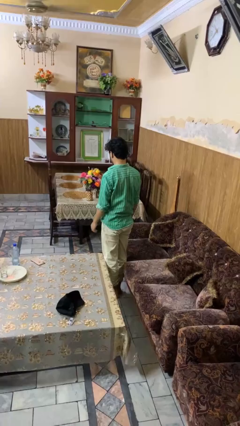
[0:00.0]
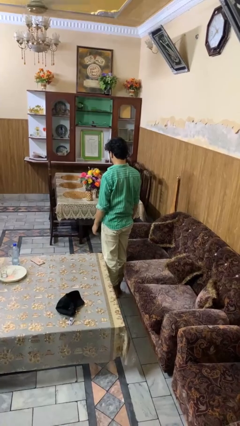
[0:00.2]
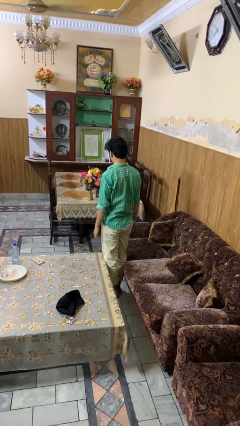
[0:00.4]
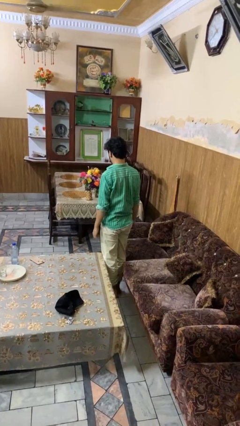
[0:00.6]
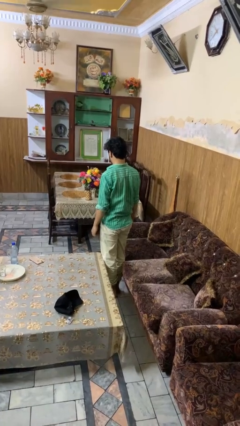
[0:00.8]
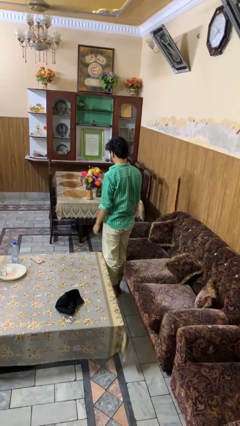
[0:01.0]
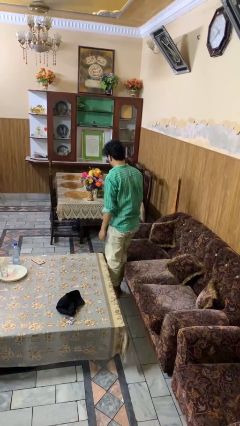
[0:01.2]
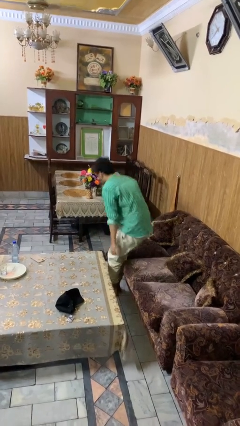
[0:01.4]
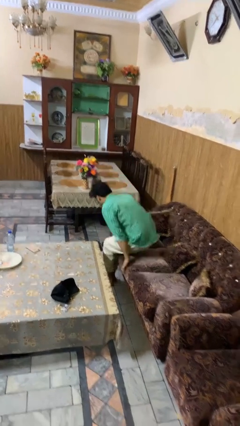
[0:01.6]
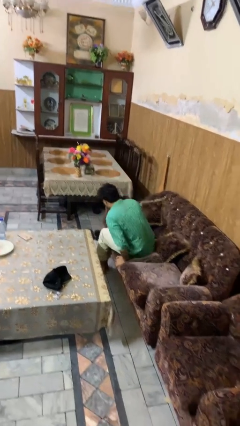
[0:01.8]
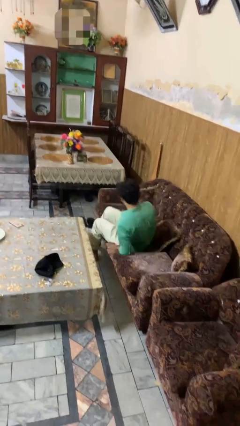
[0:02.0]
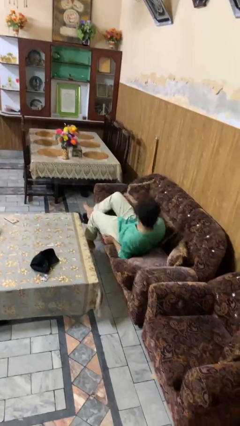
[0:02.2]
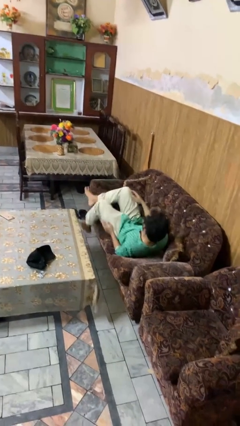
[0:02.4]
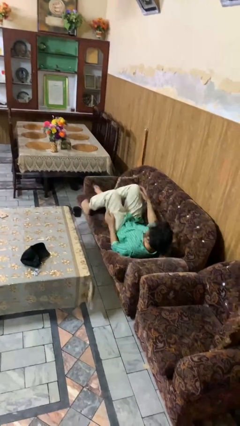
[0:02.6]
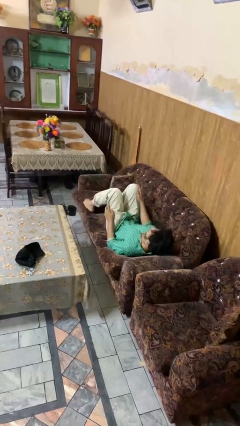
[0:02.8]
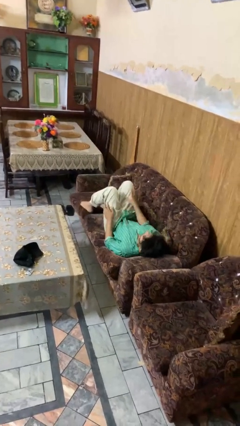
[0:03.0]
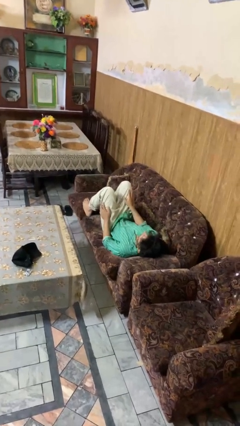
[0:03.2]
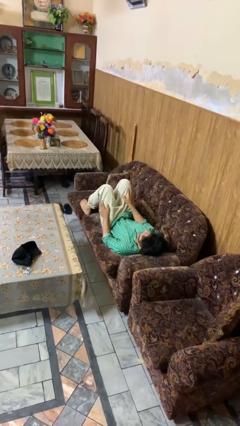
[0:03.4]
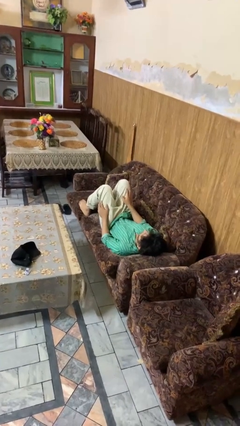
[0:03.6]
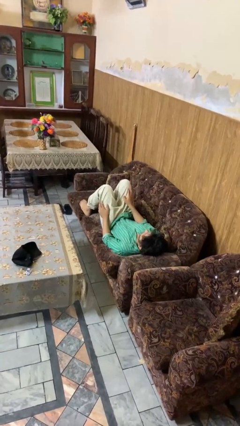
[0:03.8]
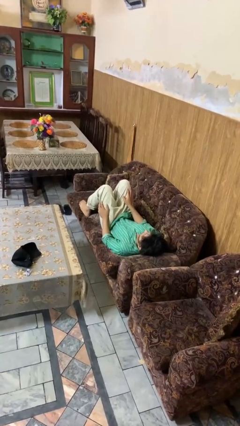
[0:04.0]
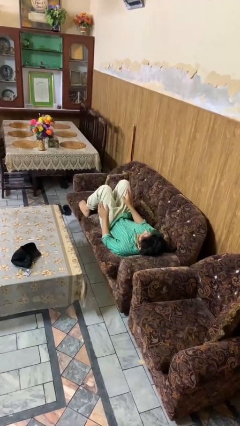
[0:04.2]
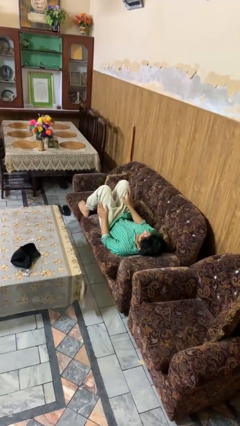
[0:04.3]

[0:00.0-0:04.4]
person lies down on couch

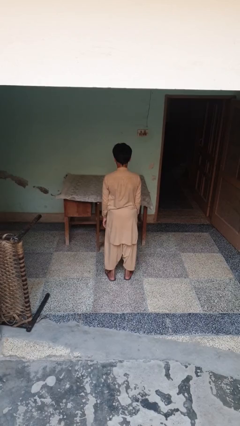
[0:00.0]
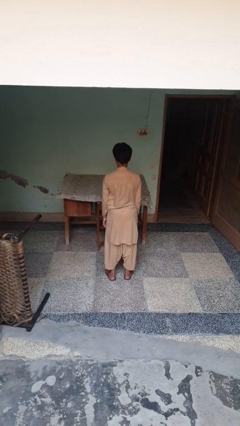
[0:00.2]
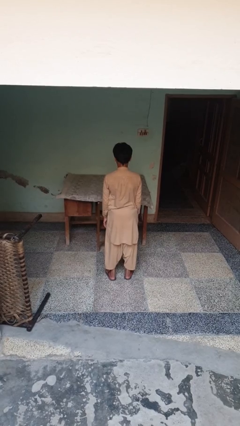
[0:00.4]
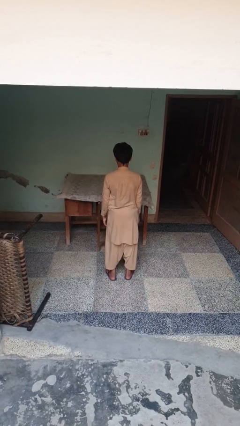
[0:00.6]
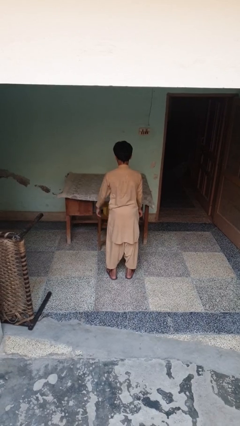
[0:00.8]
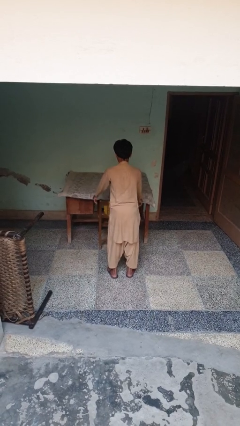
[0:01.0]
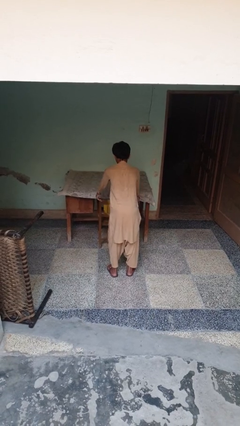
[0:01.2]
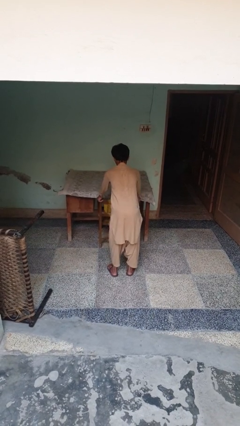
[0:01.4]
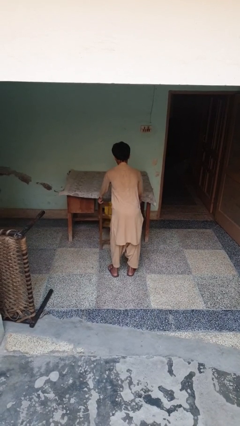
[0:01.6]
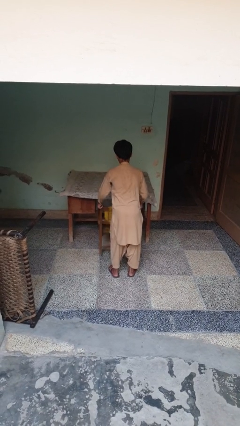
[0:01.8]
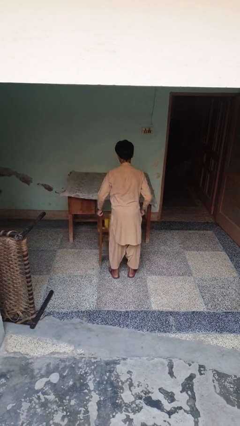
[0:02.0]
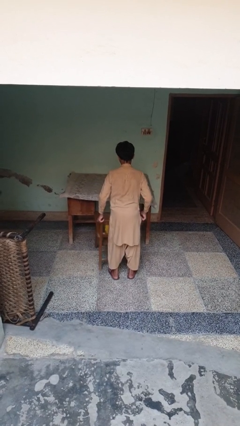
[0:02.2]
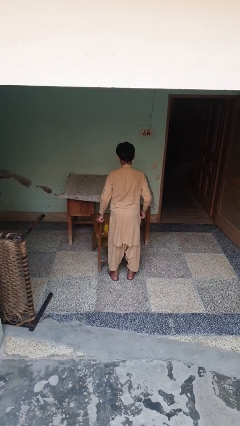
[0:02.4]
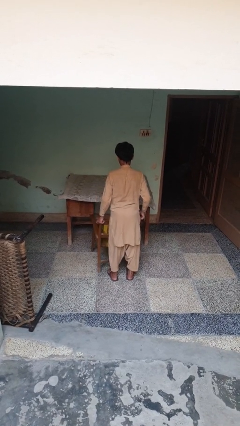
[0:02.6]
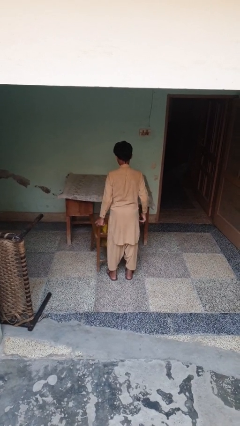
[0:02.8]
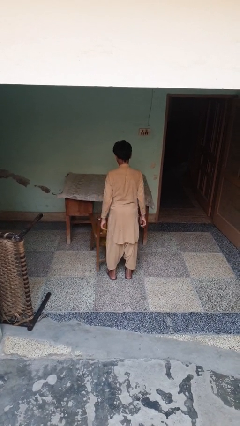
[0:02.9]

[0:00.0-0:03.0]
person pulls out chair

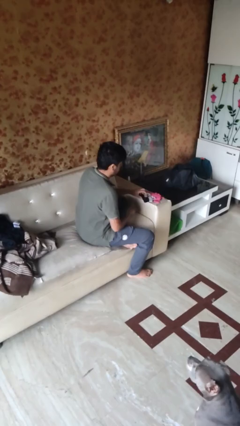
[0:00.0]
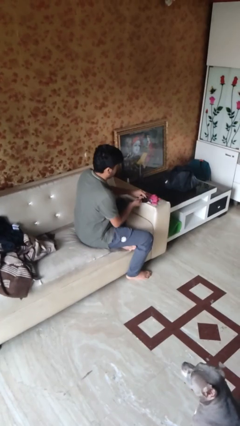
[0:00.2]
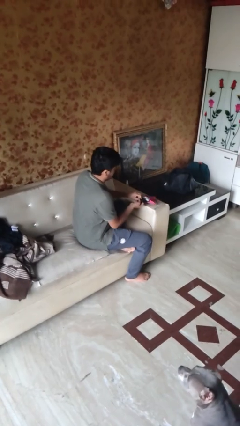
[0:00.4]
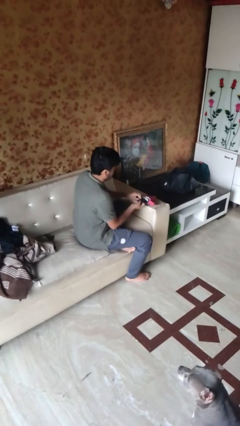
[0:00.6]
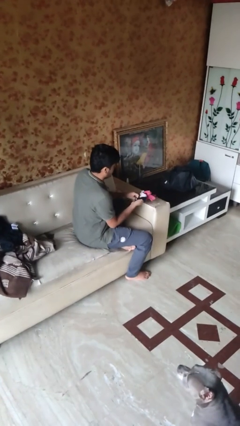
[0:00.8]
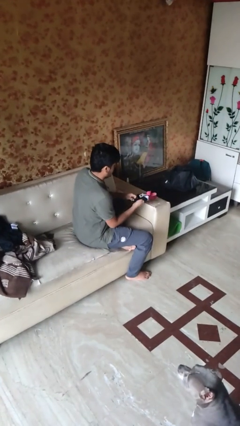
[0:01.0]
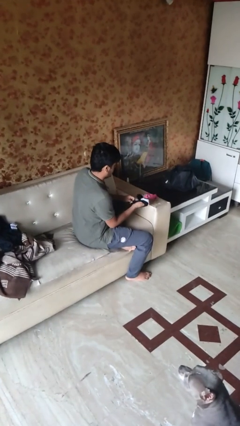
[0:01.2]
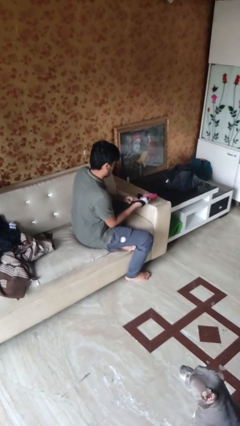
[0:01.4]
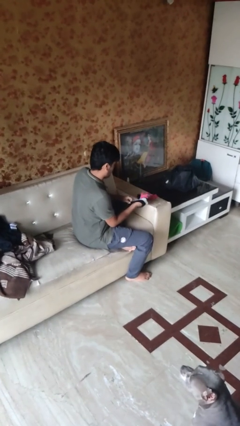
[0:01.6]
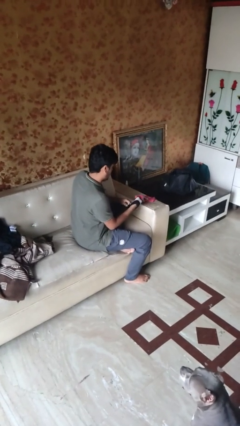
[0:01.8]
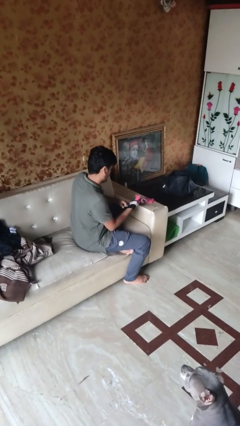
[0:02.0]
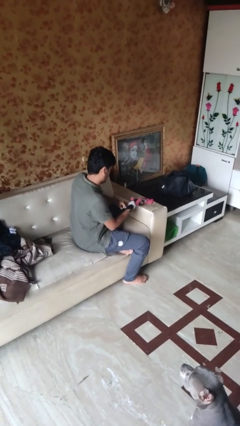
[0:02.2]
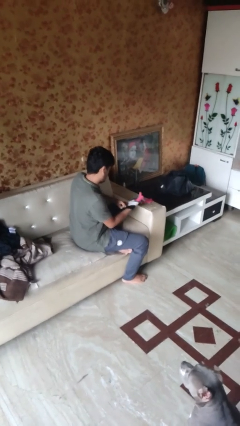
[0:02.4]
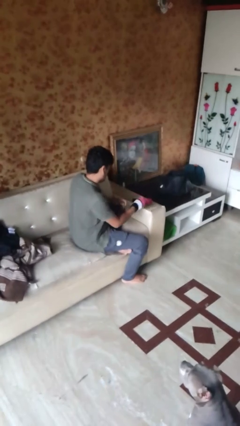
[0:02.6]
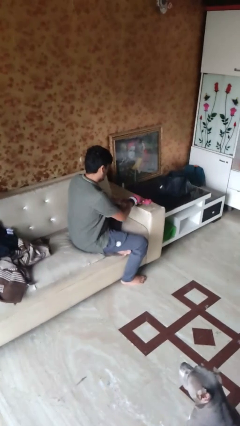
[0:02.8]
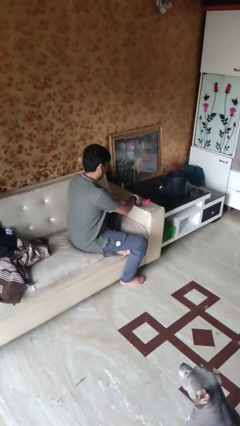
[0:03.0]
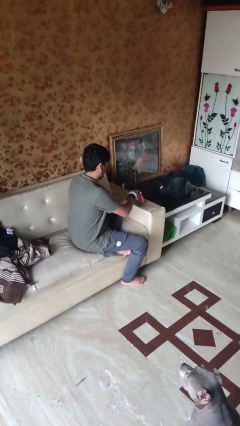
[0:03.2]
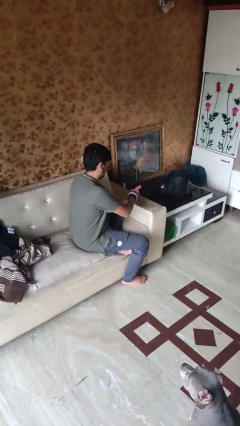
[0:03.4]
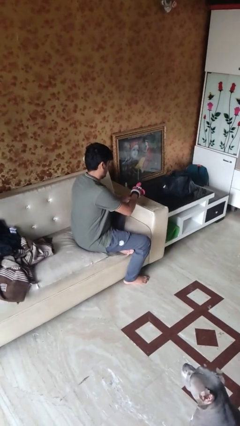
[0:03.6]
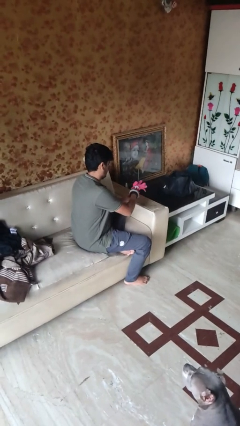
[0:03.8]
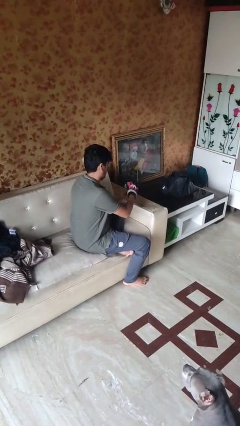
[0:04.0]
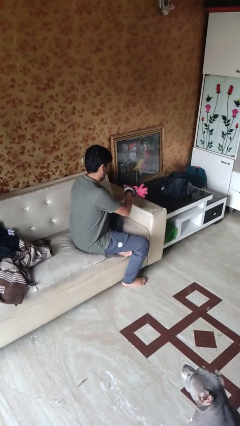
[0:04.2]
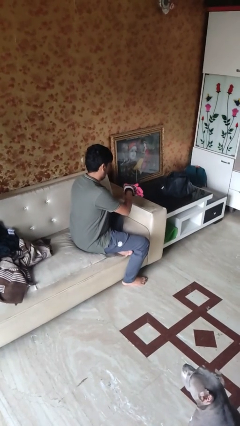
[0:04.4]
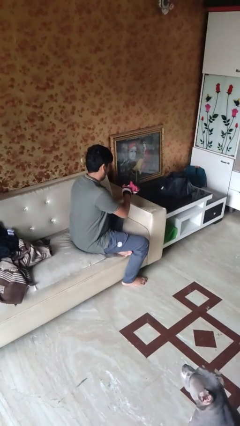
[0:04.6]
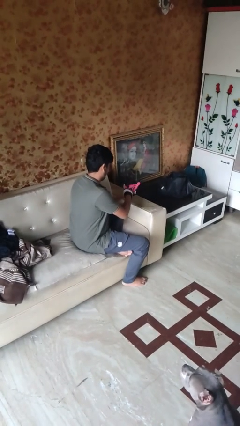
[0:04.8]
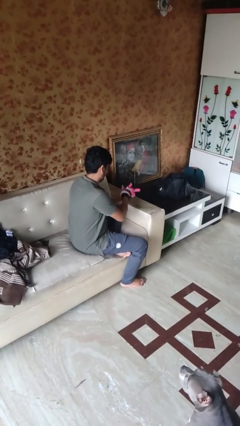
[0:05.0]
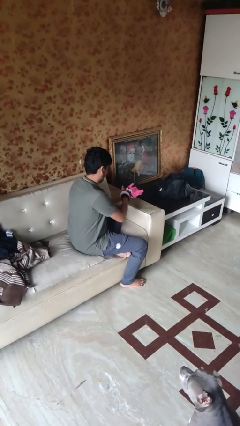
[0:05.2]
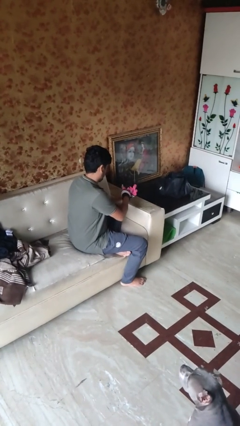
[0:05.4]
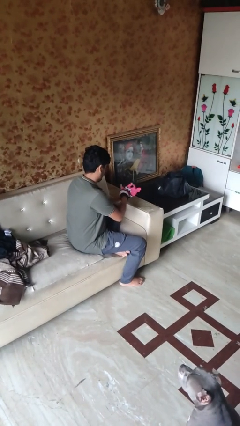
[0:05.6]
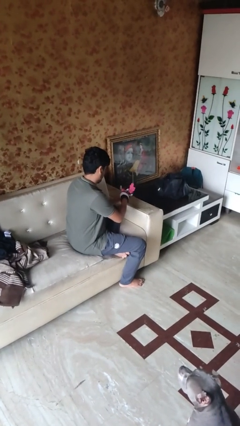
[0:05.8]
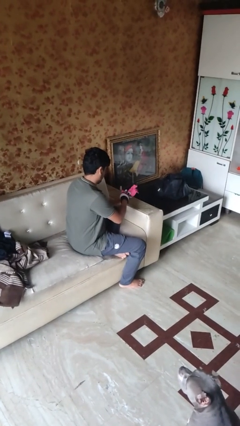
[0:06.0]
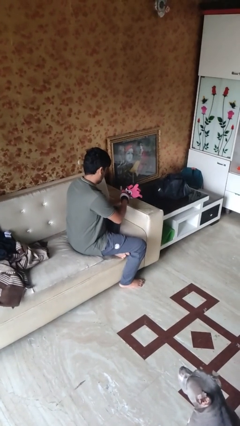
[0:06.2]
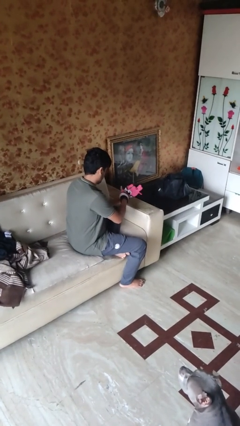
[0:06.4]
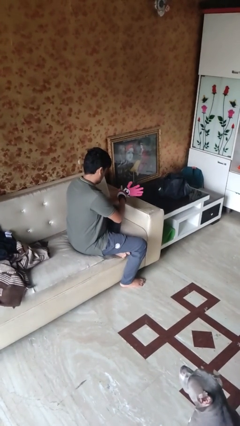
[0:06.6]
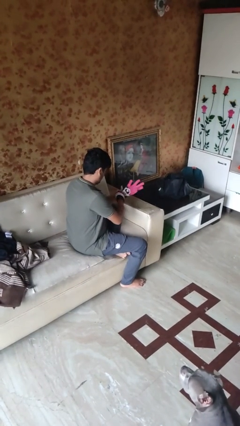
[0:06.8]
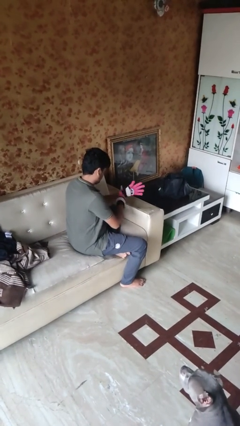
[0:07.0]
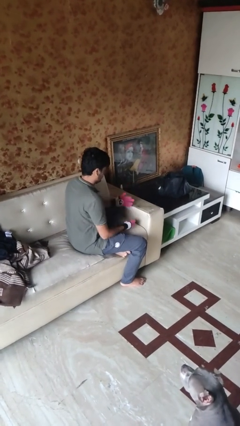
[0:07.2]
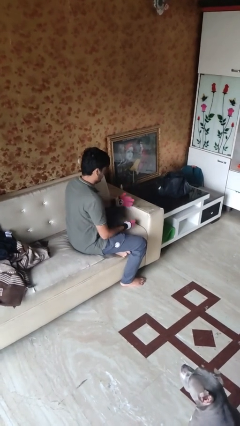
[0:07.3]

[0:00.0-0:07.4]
person puts on gloves

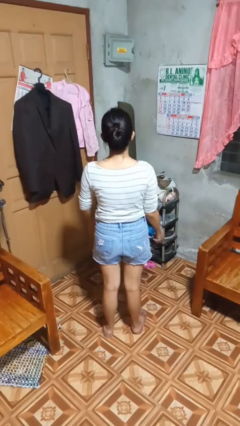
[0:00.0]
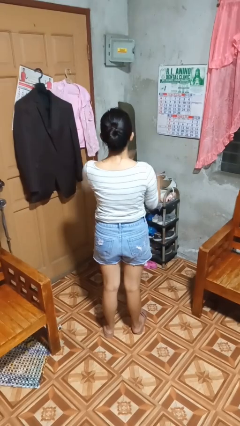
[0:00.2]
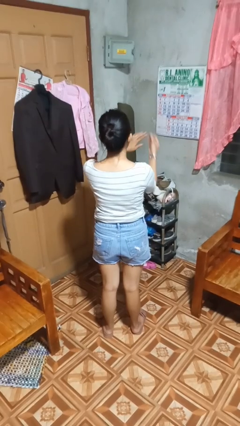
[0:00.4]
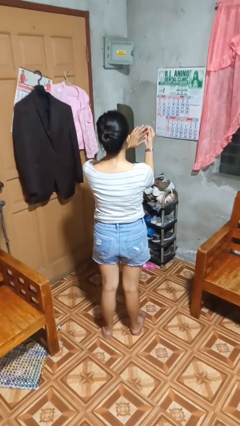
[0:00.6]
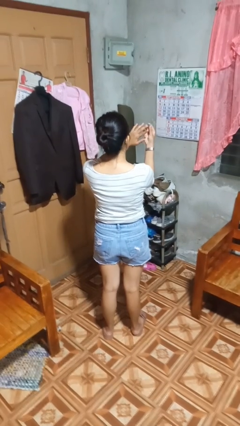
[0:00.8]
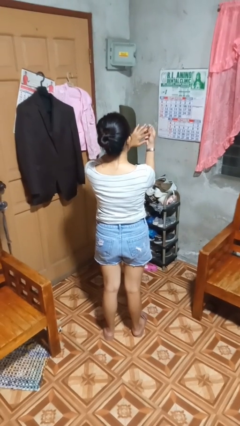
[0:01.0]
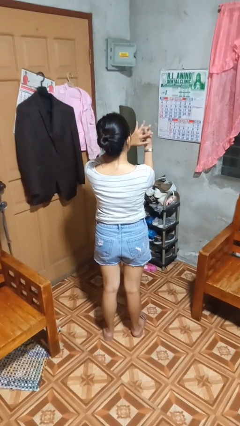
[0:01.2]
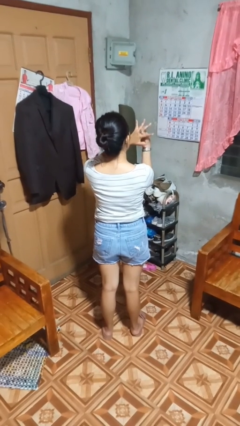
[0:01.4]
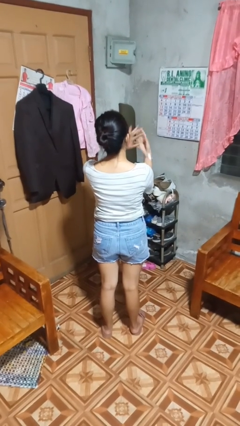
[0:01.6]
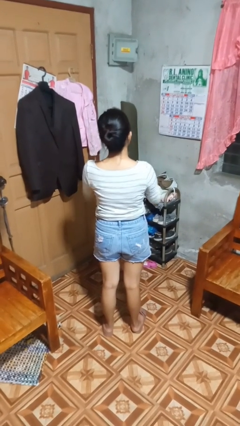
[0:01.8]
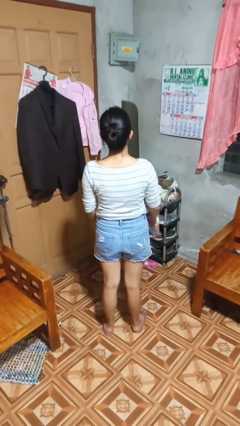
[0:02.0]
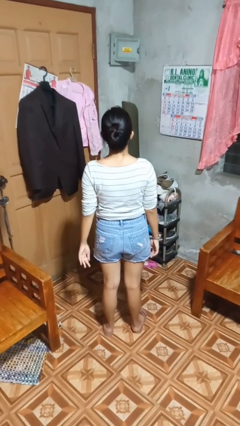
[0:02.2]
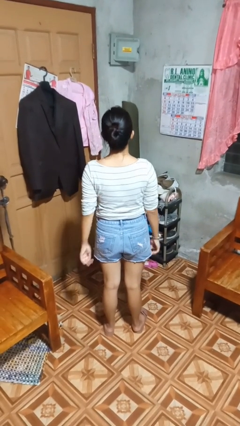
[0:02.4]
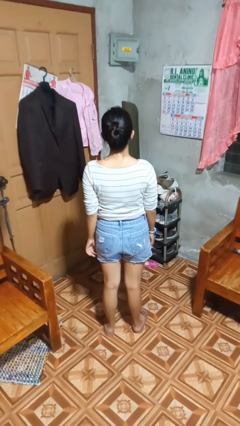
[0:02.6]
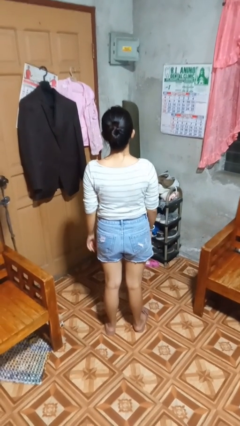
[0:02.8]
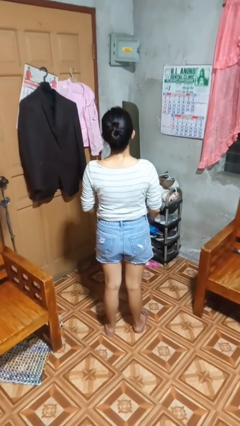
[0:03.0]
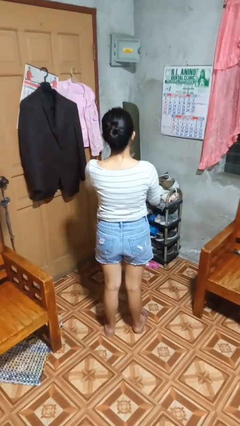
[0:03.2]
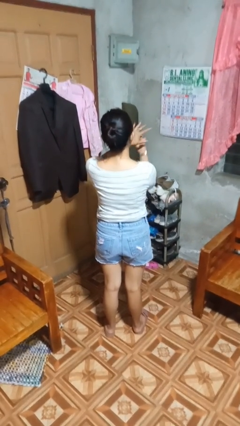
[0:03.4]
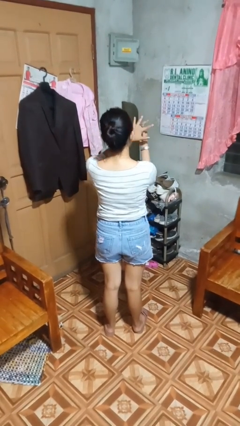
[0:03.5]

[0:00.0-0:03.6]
person puts on ring
